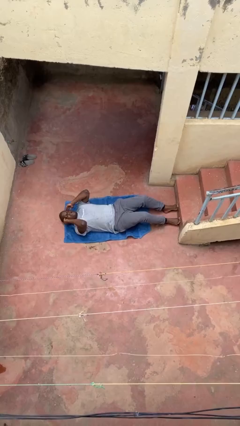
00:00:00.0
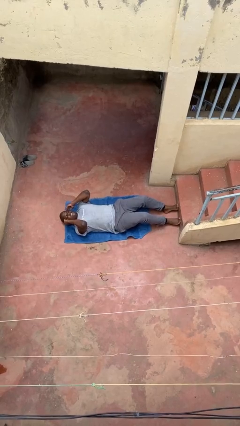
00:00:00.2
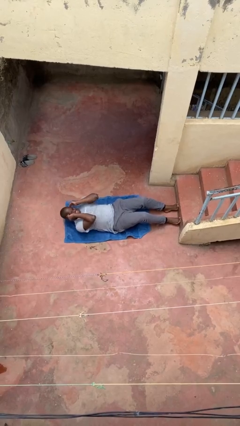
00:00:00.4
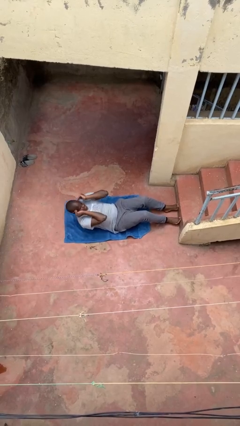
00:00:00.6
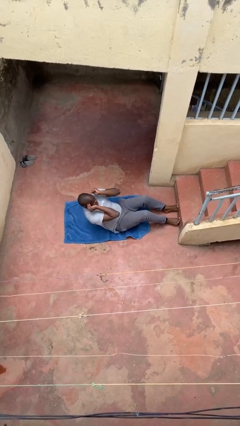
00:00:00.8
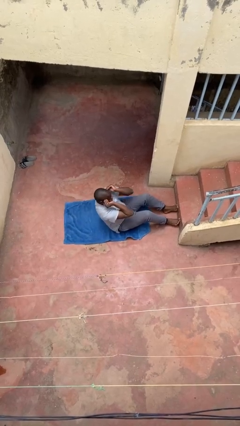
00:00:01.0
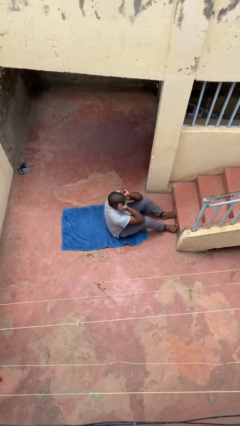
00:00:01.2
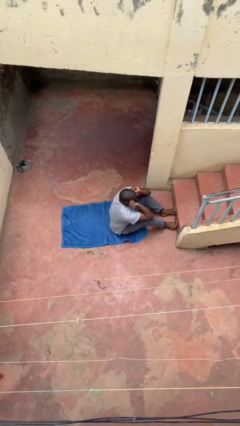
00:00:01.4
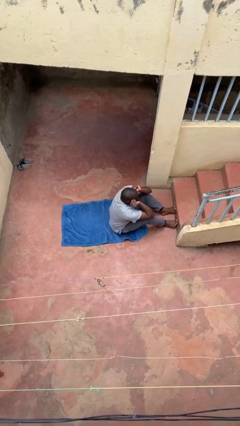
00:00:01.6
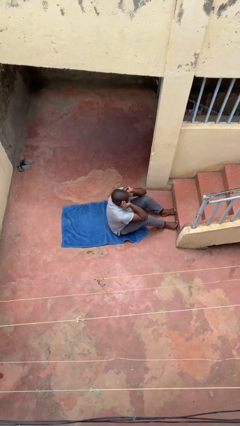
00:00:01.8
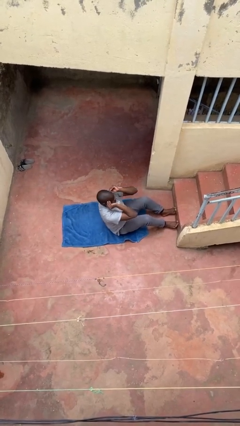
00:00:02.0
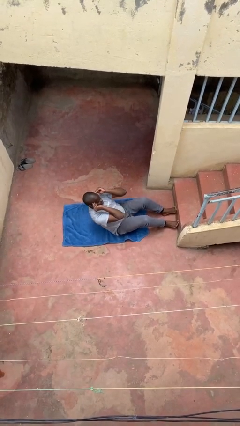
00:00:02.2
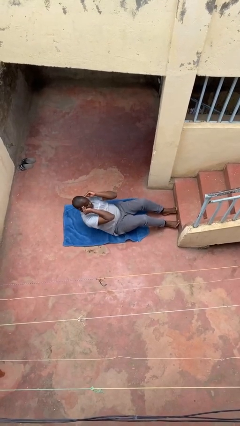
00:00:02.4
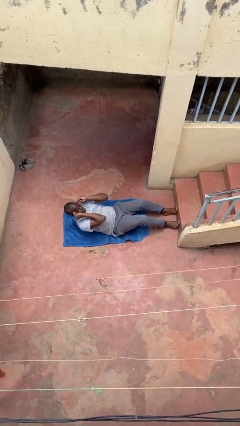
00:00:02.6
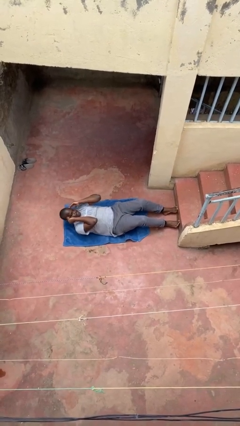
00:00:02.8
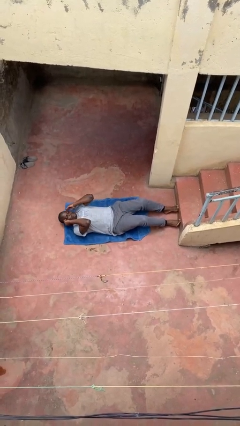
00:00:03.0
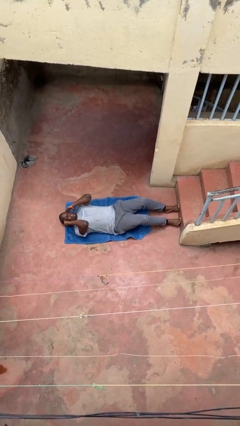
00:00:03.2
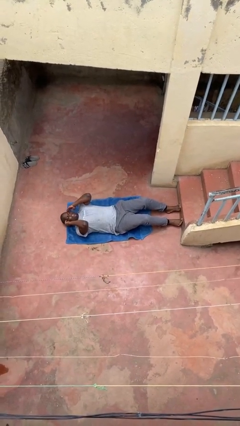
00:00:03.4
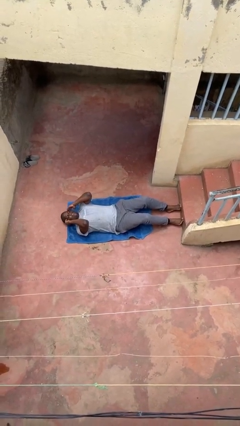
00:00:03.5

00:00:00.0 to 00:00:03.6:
person exercises with situp

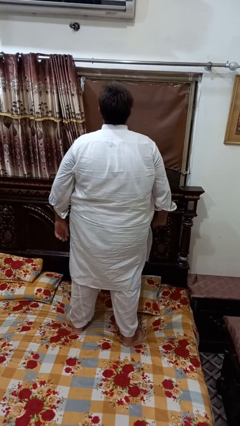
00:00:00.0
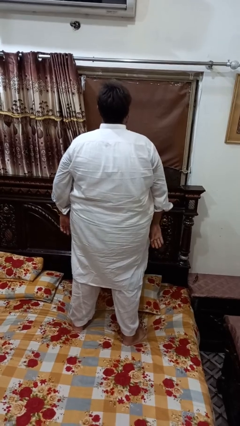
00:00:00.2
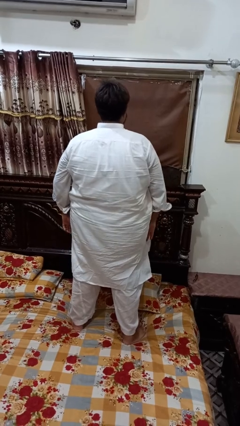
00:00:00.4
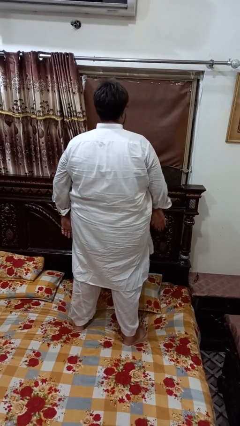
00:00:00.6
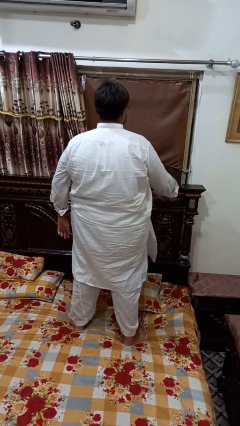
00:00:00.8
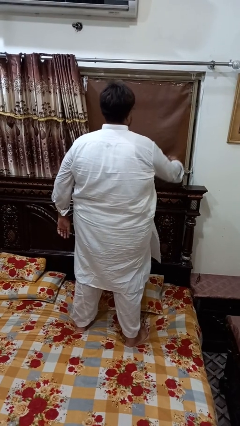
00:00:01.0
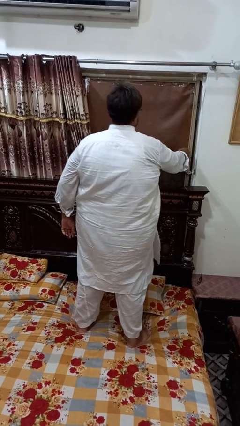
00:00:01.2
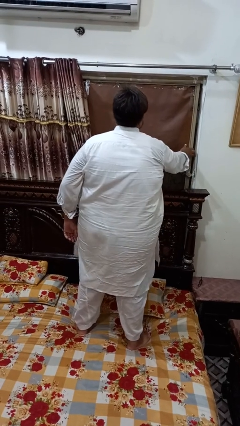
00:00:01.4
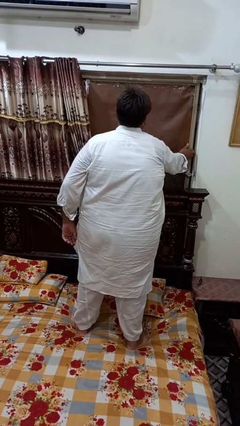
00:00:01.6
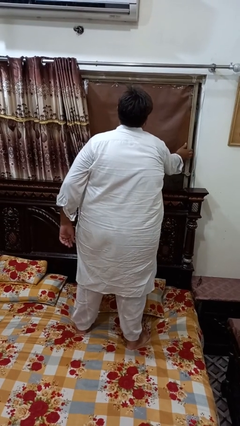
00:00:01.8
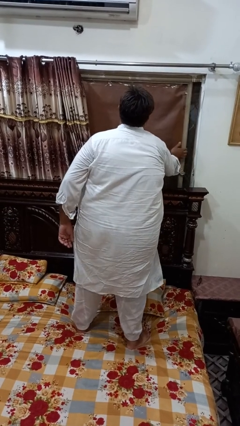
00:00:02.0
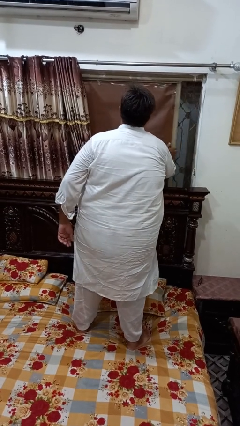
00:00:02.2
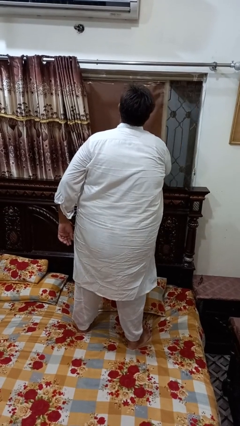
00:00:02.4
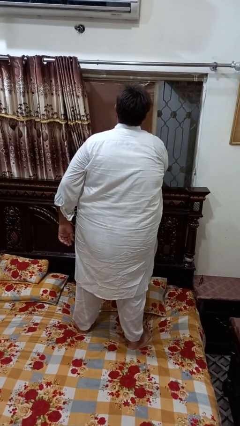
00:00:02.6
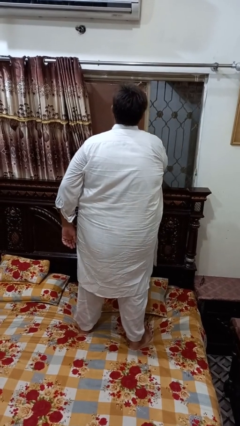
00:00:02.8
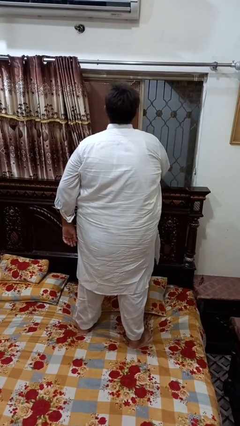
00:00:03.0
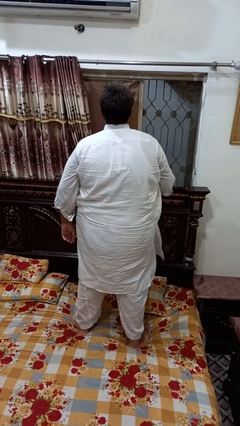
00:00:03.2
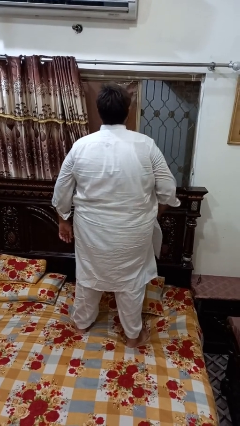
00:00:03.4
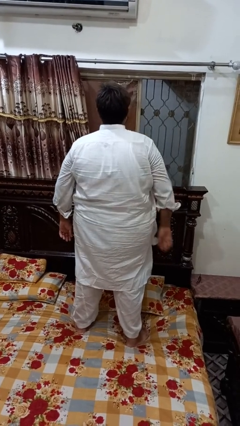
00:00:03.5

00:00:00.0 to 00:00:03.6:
person opens home window

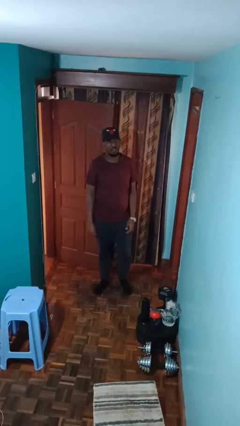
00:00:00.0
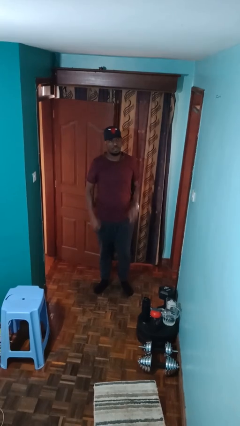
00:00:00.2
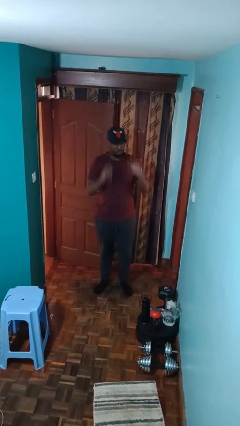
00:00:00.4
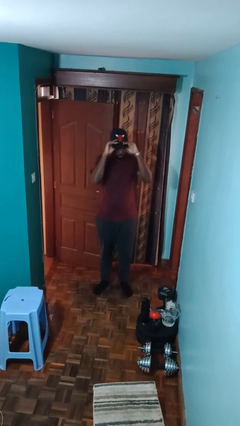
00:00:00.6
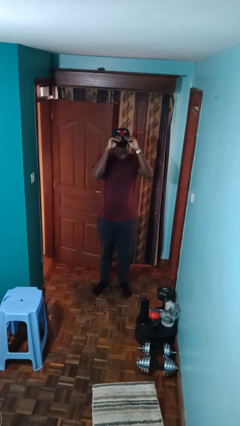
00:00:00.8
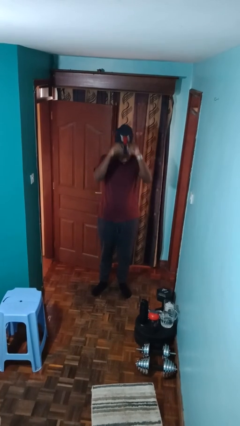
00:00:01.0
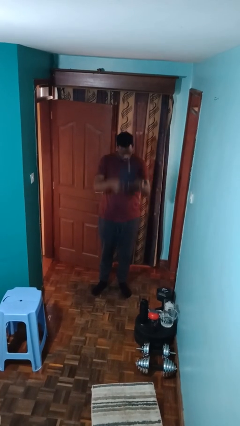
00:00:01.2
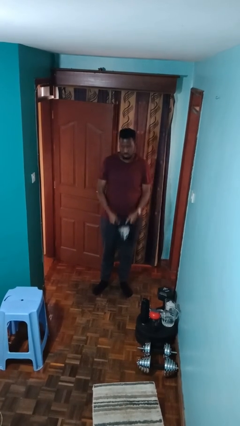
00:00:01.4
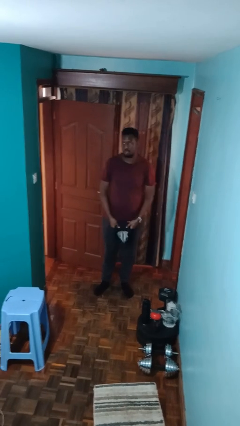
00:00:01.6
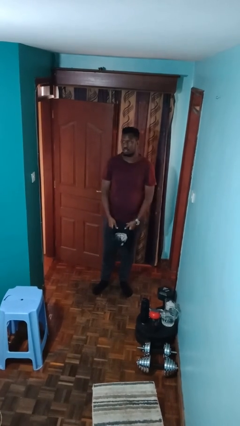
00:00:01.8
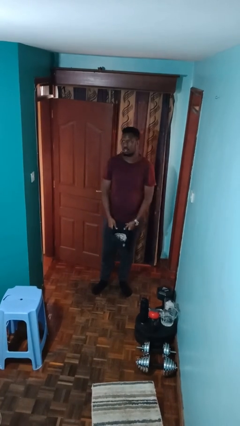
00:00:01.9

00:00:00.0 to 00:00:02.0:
person takes off hat

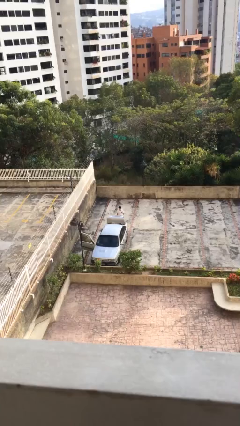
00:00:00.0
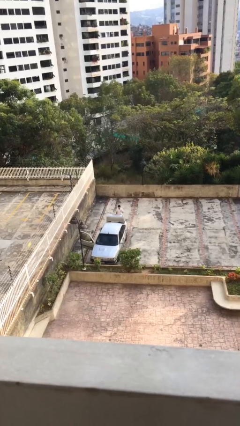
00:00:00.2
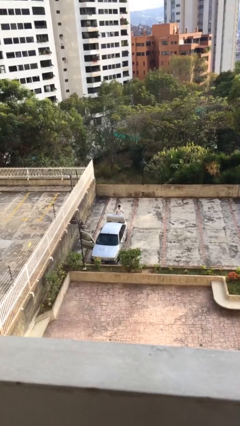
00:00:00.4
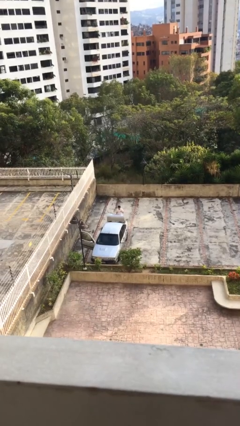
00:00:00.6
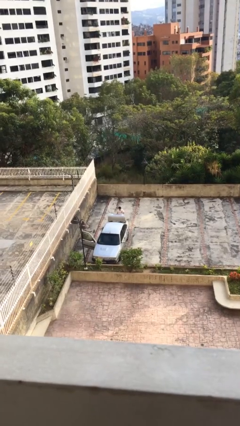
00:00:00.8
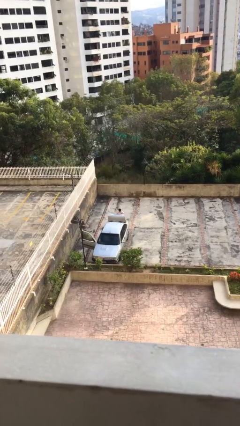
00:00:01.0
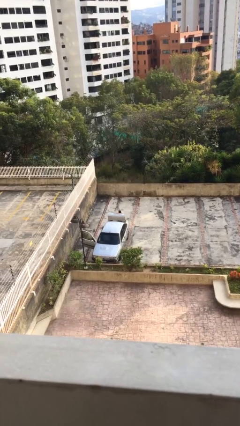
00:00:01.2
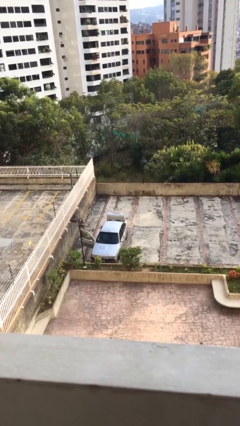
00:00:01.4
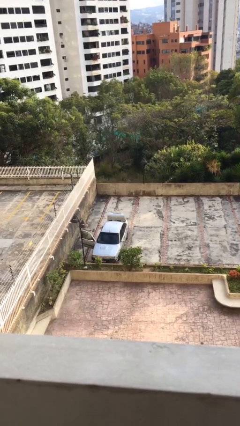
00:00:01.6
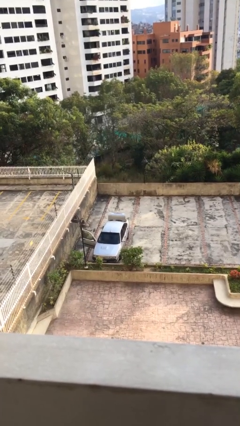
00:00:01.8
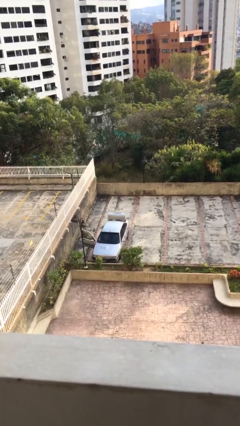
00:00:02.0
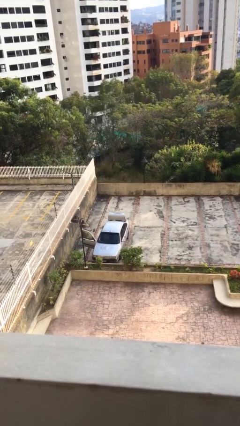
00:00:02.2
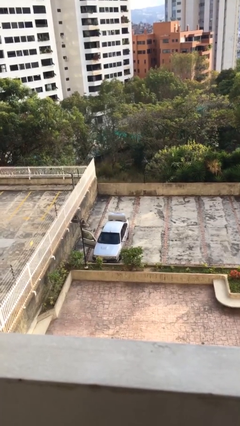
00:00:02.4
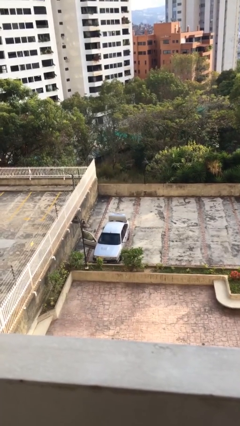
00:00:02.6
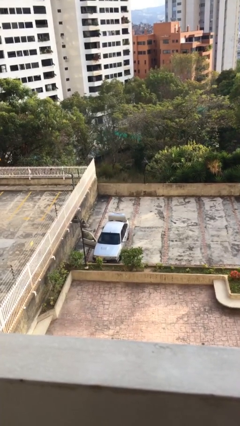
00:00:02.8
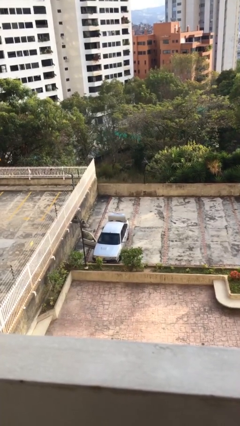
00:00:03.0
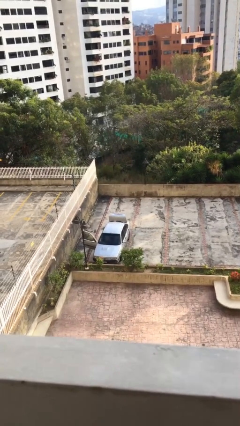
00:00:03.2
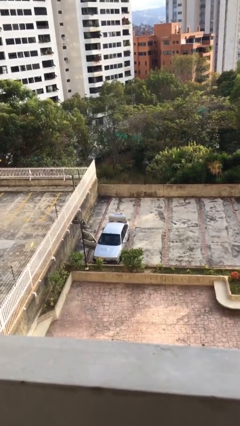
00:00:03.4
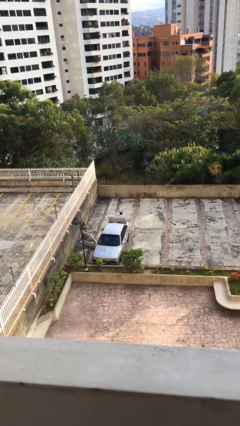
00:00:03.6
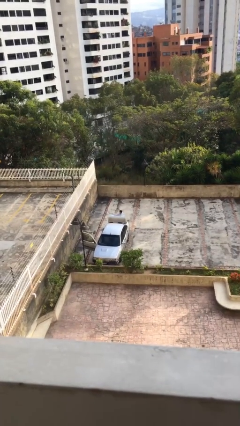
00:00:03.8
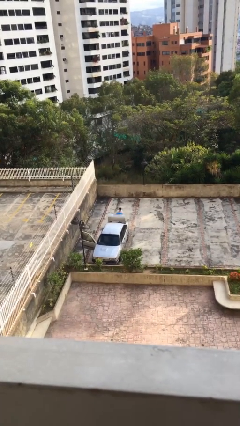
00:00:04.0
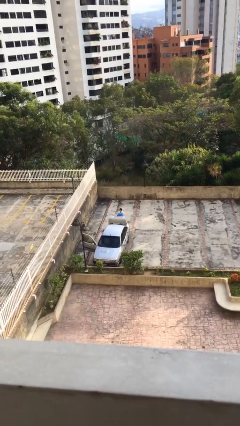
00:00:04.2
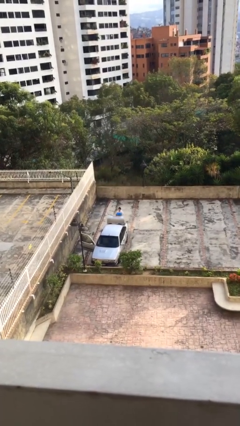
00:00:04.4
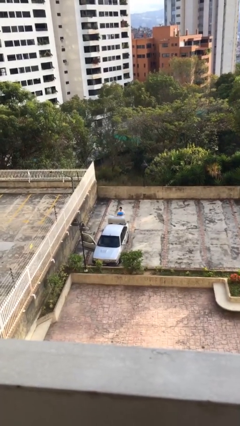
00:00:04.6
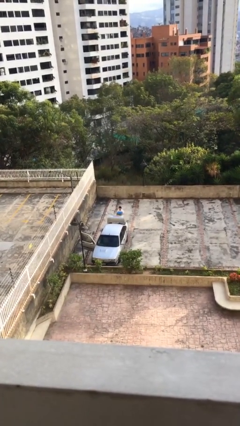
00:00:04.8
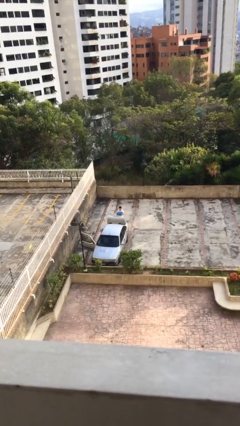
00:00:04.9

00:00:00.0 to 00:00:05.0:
person unloads car

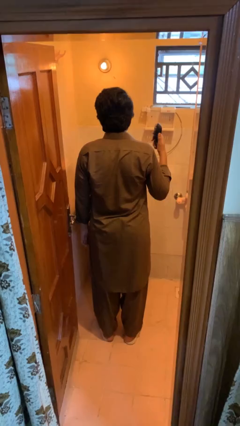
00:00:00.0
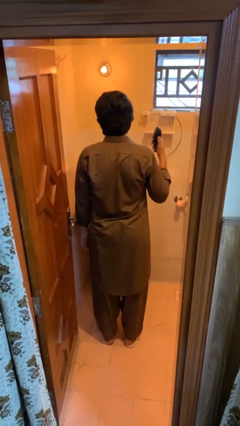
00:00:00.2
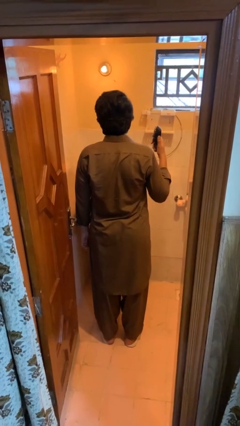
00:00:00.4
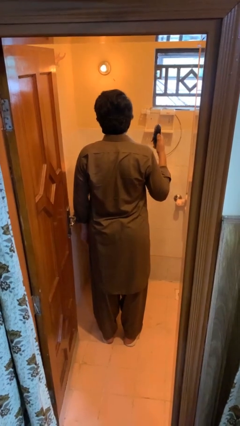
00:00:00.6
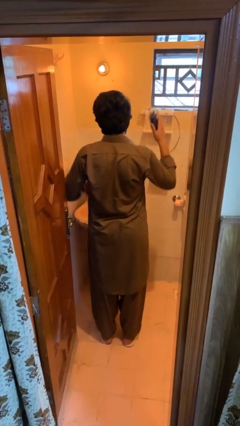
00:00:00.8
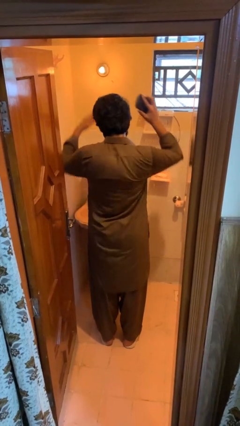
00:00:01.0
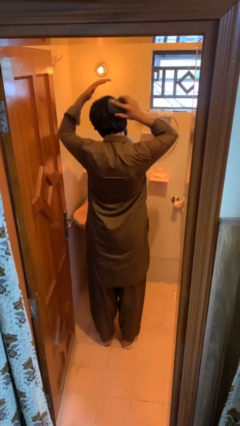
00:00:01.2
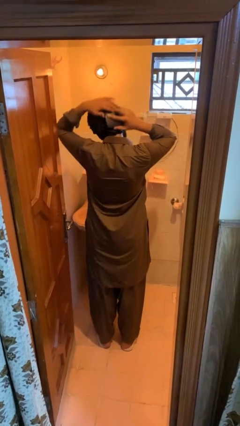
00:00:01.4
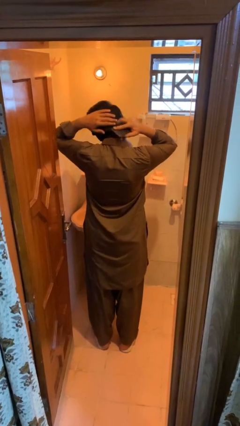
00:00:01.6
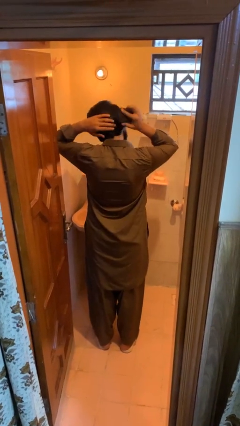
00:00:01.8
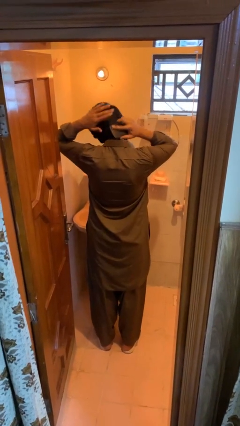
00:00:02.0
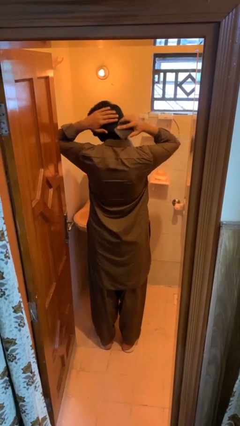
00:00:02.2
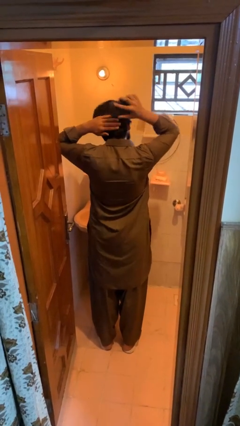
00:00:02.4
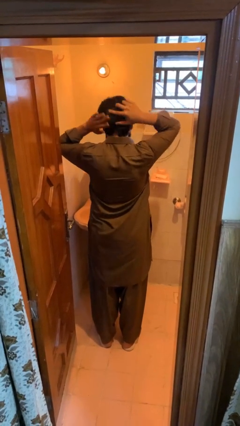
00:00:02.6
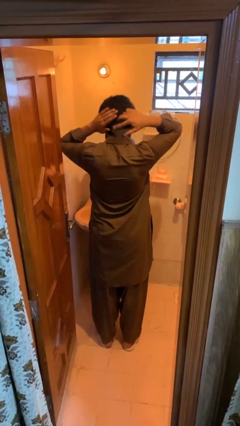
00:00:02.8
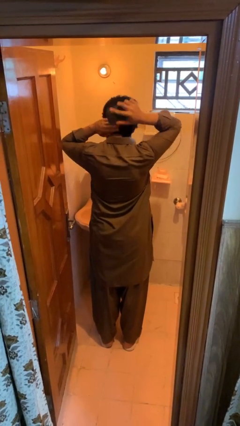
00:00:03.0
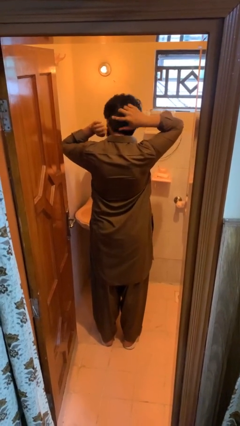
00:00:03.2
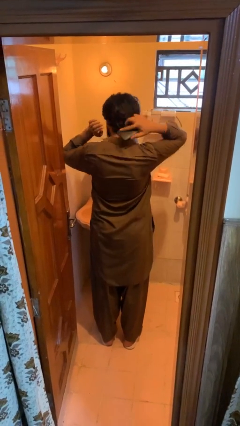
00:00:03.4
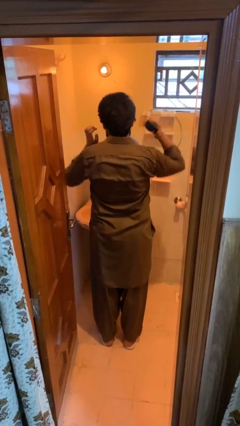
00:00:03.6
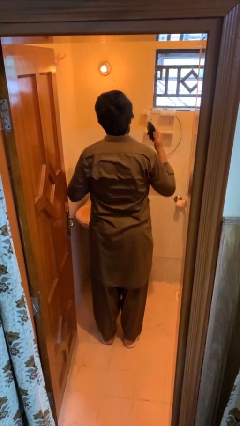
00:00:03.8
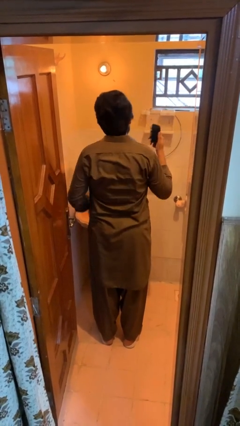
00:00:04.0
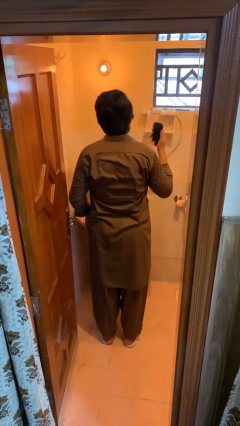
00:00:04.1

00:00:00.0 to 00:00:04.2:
person brushes hair
